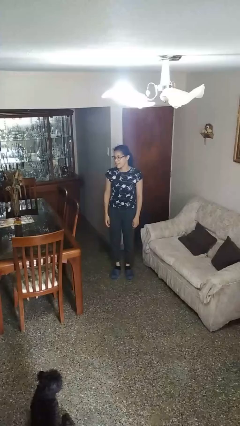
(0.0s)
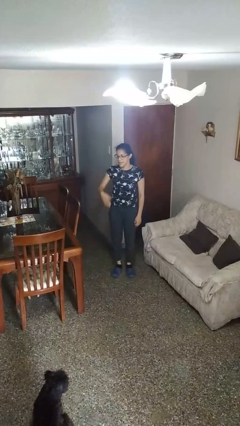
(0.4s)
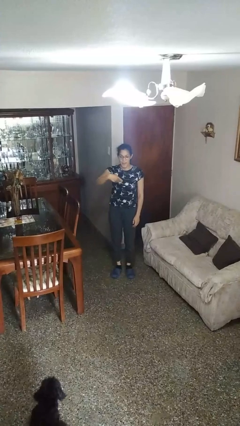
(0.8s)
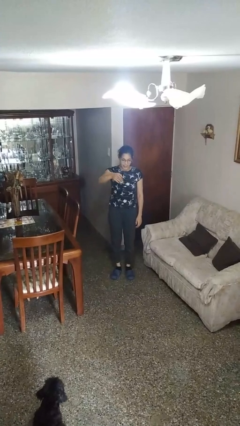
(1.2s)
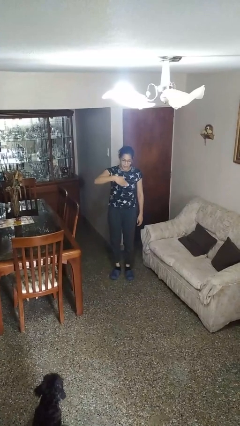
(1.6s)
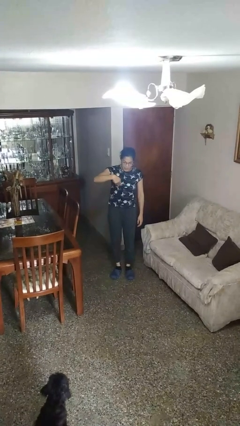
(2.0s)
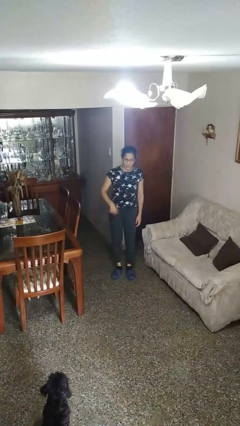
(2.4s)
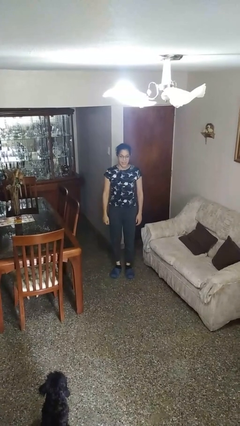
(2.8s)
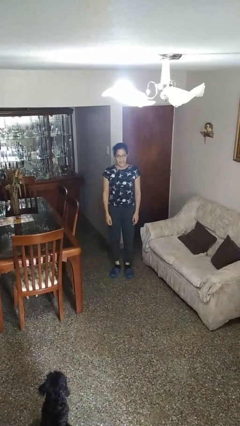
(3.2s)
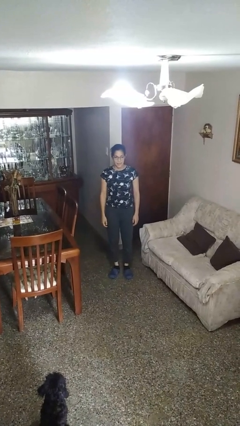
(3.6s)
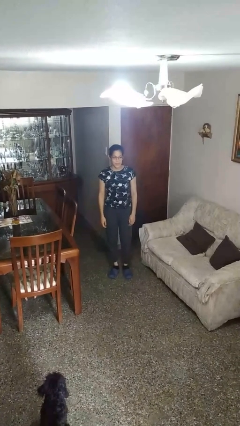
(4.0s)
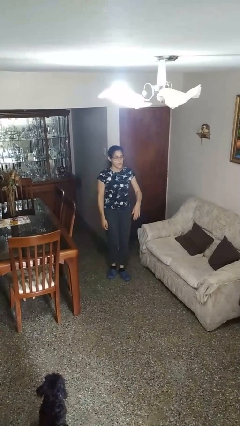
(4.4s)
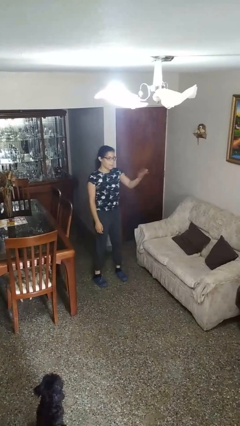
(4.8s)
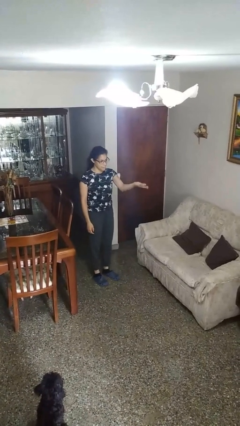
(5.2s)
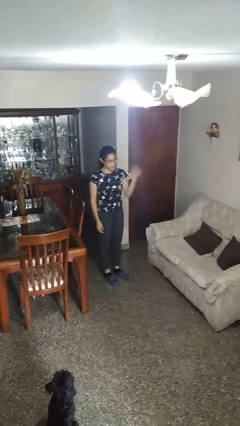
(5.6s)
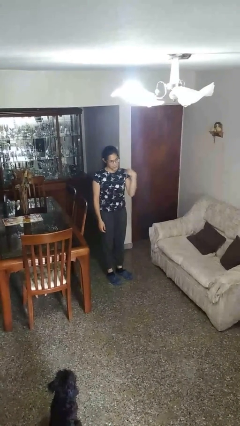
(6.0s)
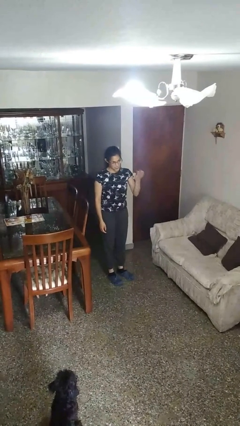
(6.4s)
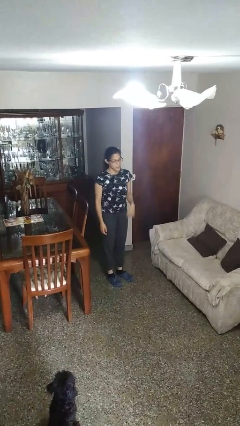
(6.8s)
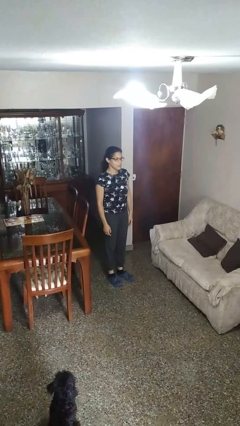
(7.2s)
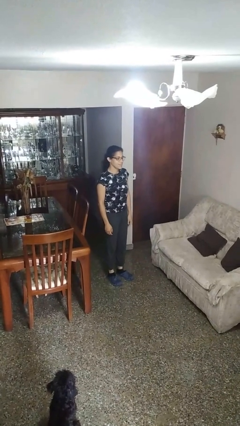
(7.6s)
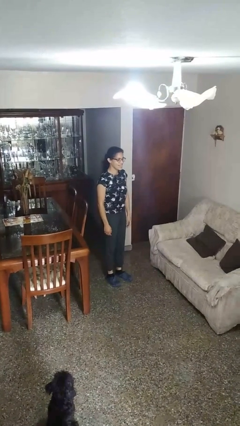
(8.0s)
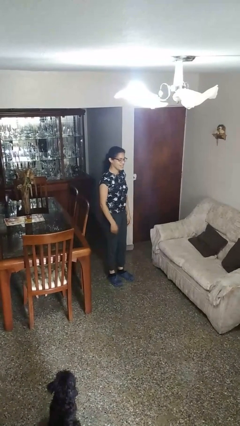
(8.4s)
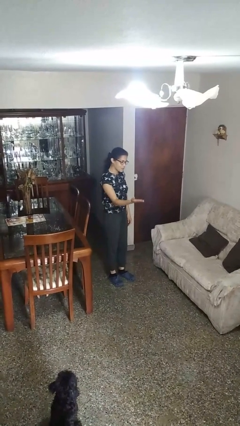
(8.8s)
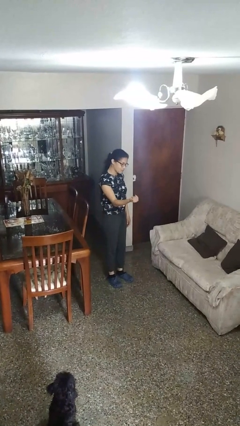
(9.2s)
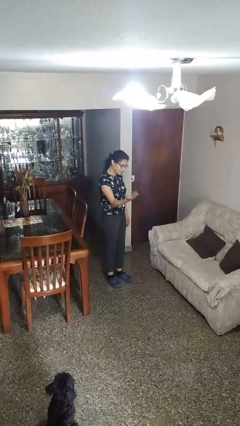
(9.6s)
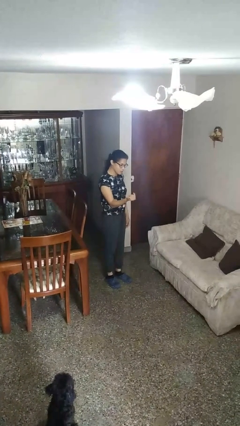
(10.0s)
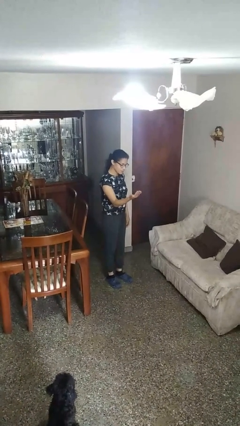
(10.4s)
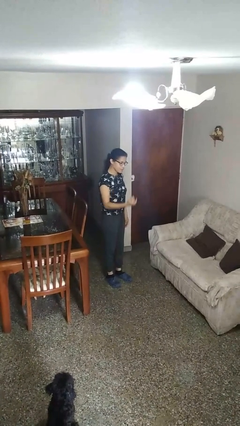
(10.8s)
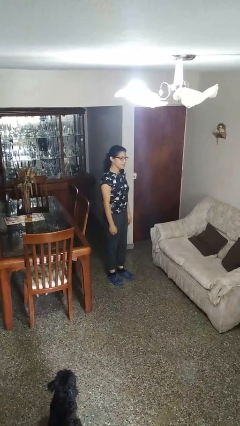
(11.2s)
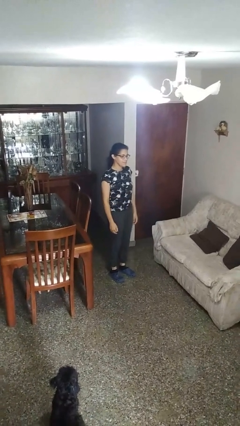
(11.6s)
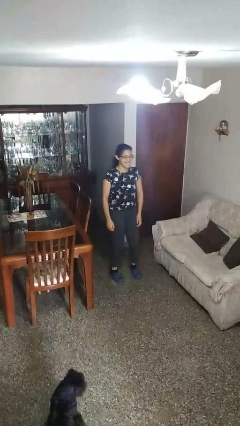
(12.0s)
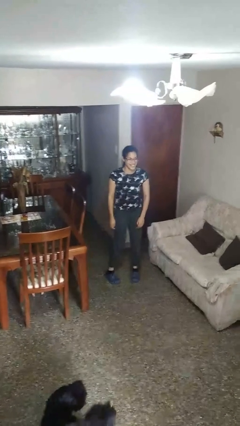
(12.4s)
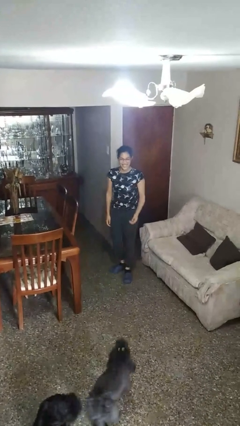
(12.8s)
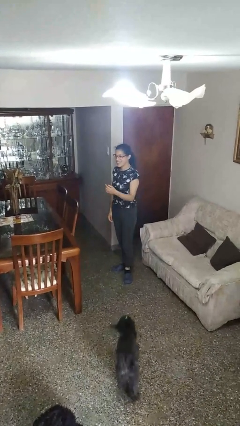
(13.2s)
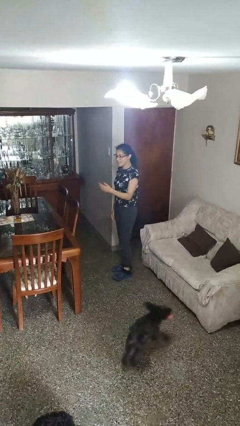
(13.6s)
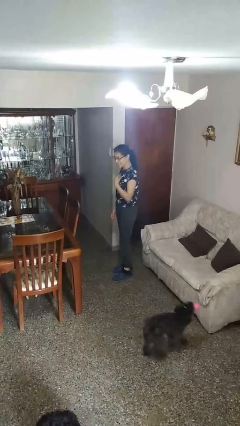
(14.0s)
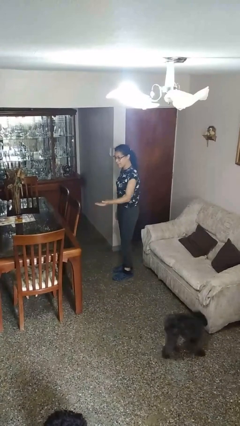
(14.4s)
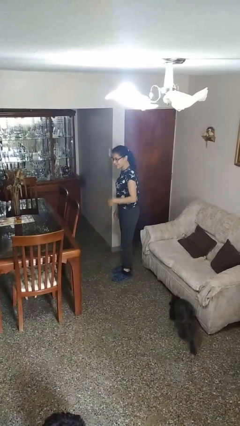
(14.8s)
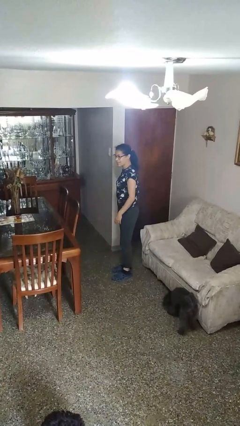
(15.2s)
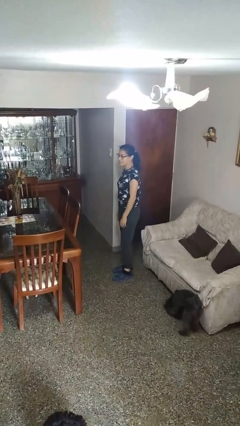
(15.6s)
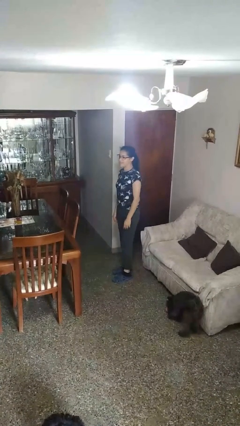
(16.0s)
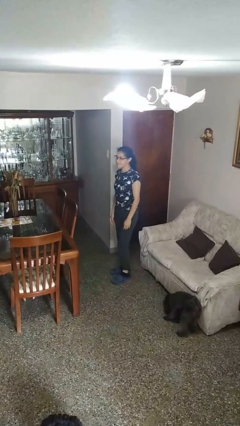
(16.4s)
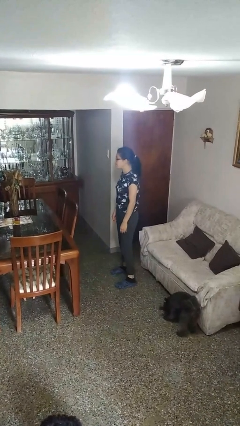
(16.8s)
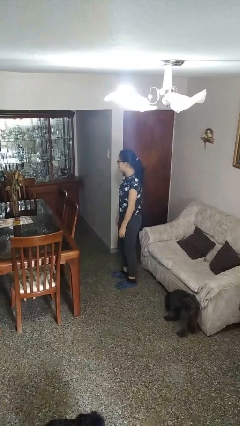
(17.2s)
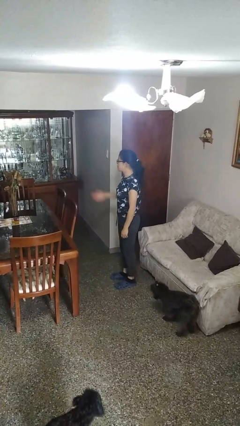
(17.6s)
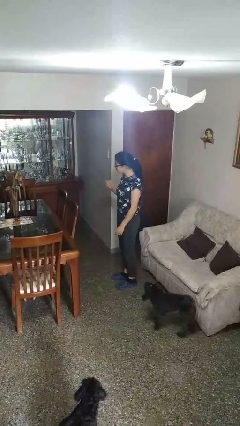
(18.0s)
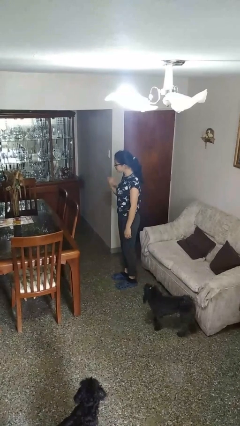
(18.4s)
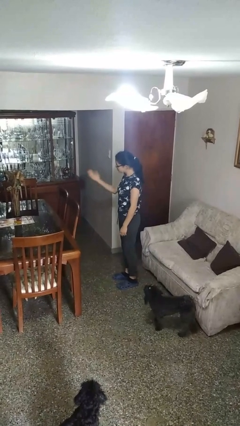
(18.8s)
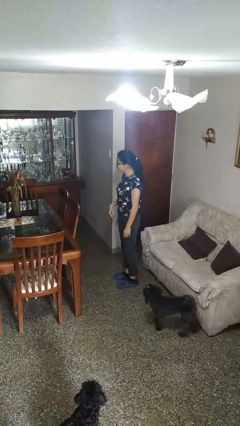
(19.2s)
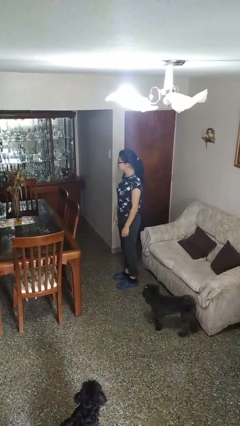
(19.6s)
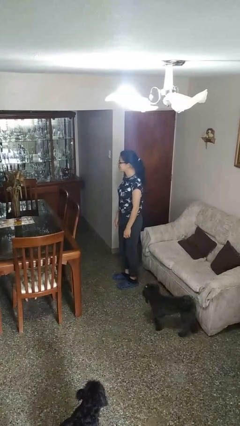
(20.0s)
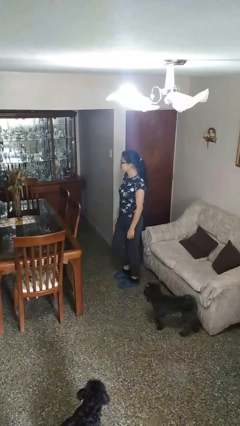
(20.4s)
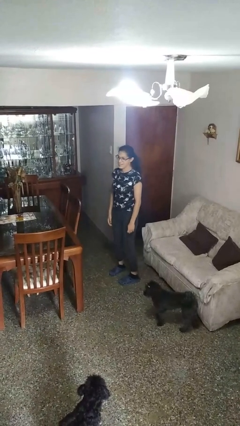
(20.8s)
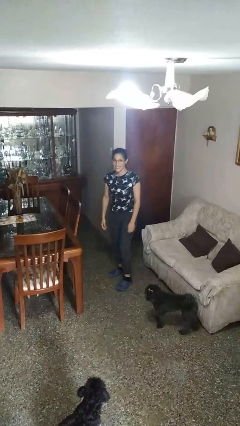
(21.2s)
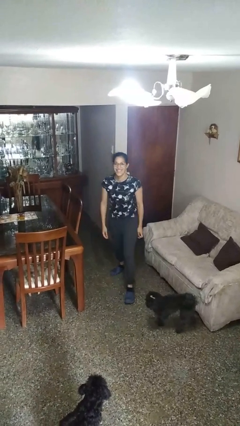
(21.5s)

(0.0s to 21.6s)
person gestures come here

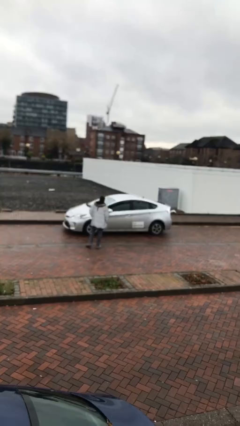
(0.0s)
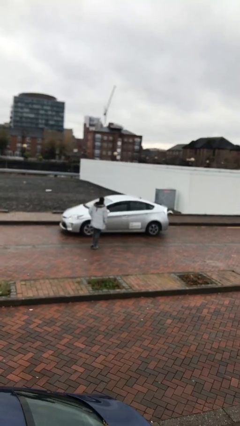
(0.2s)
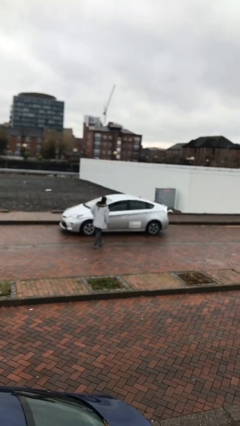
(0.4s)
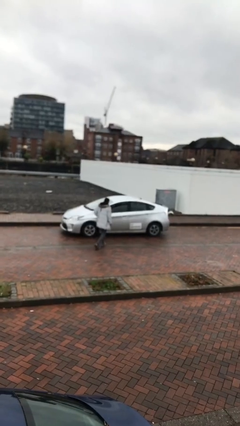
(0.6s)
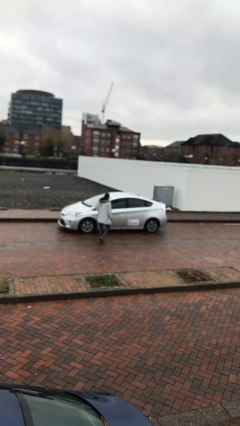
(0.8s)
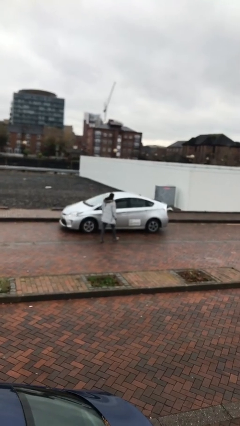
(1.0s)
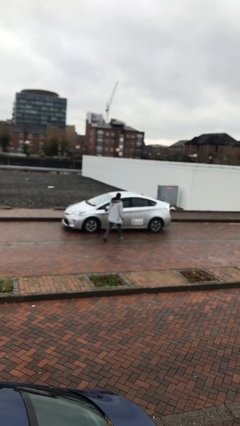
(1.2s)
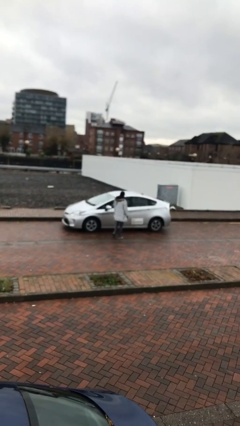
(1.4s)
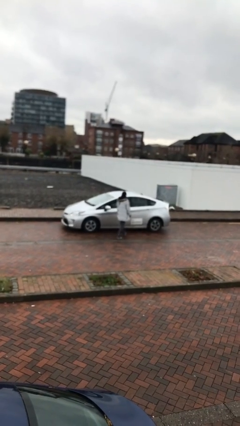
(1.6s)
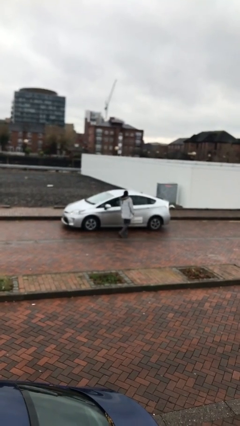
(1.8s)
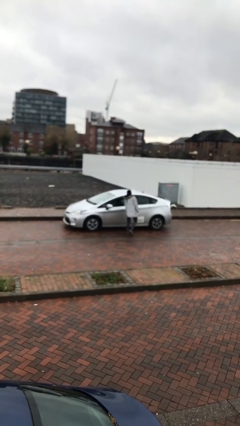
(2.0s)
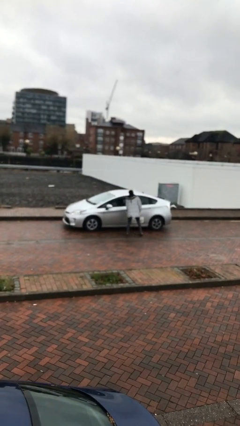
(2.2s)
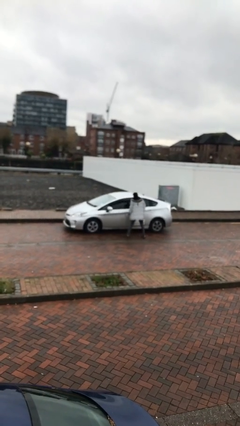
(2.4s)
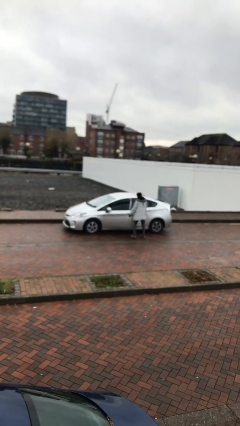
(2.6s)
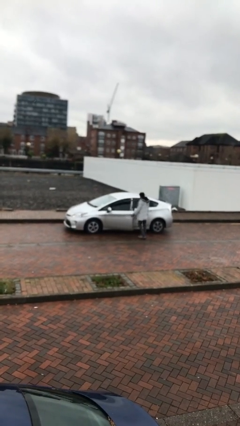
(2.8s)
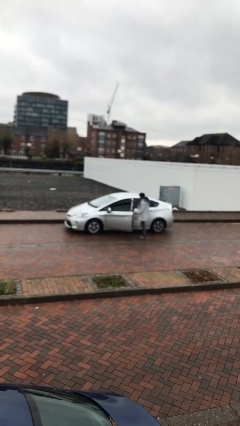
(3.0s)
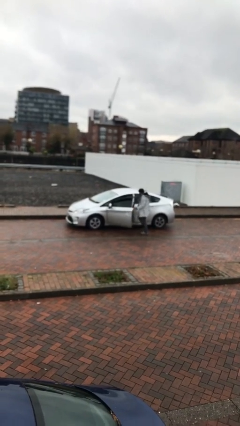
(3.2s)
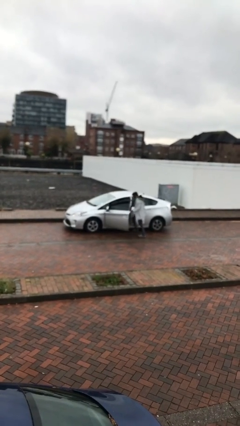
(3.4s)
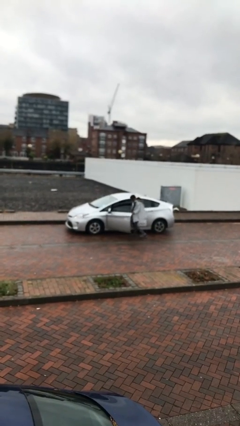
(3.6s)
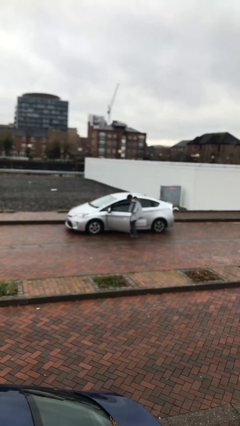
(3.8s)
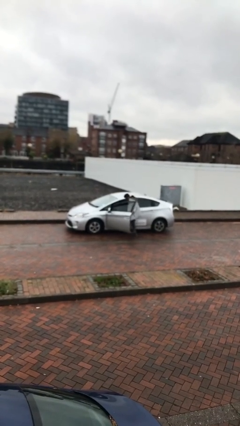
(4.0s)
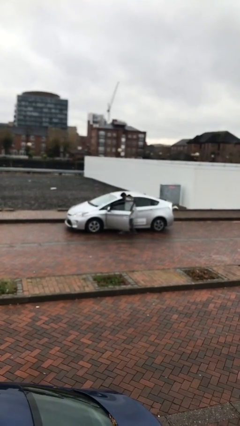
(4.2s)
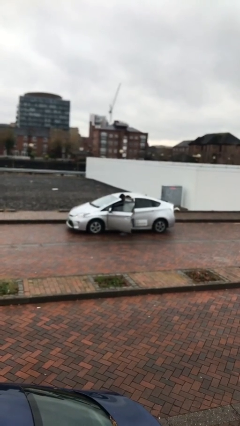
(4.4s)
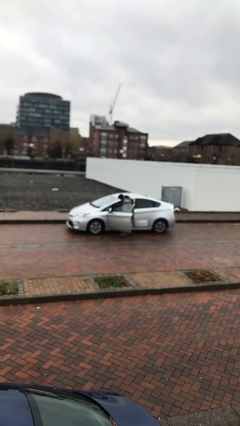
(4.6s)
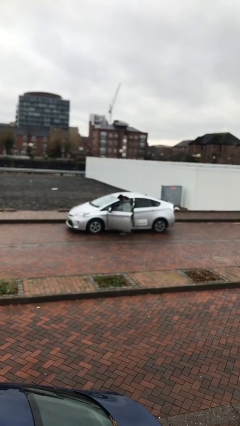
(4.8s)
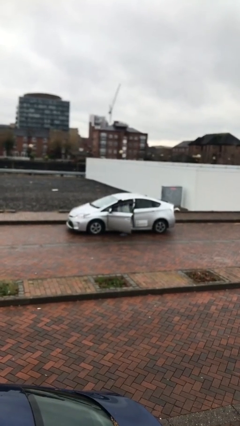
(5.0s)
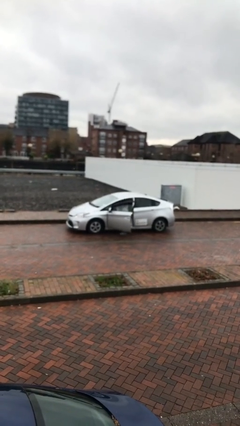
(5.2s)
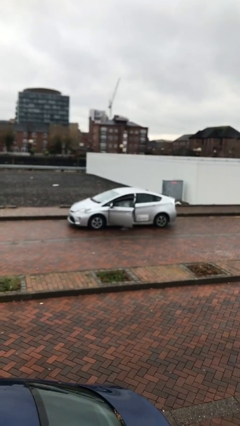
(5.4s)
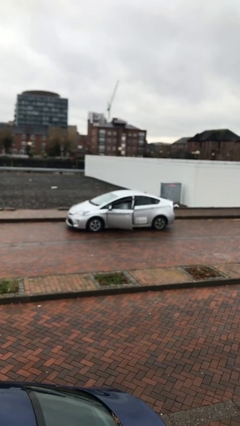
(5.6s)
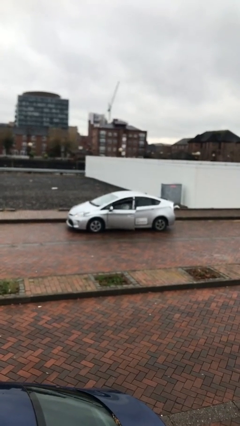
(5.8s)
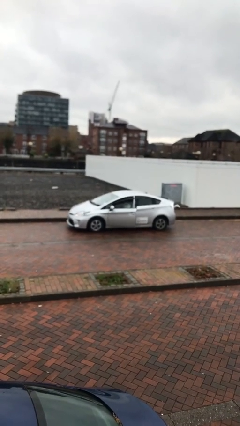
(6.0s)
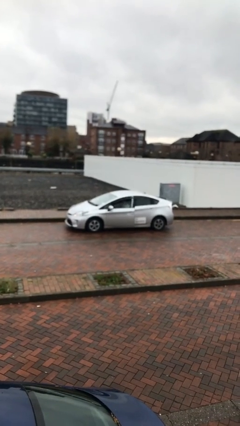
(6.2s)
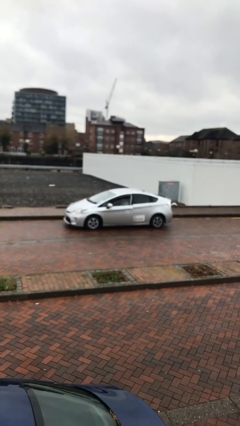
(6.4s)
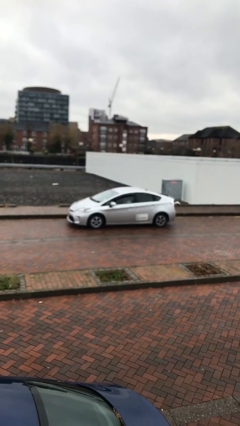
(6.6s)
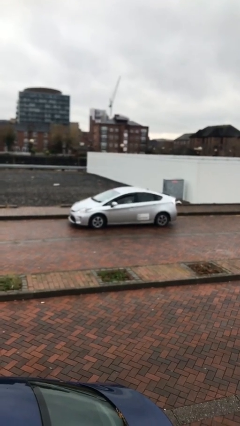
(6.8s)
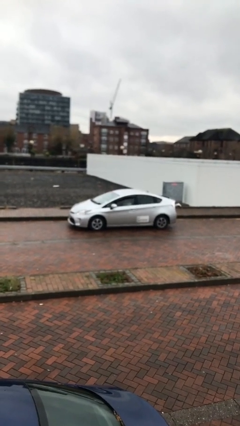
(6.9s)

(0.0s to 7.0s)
car picks up person

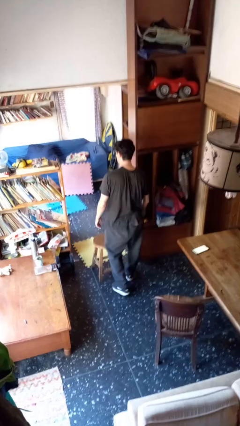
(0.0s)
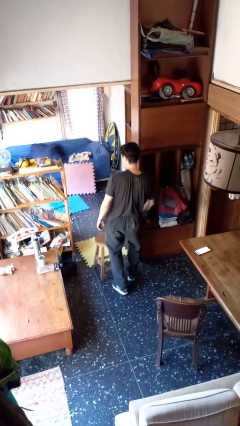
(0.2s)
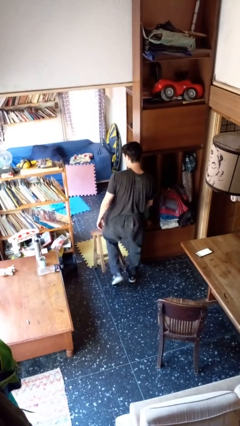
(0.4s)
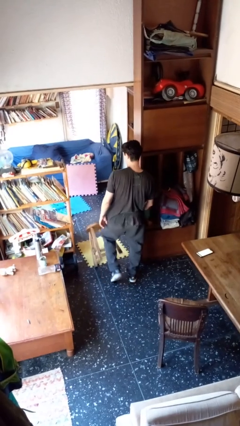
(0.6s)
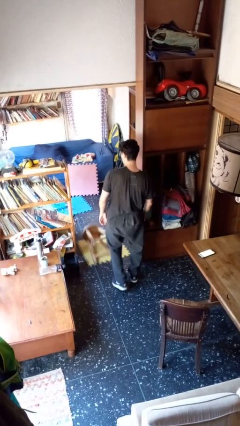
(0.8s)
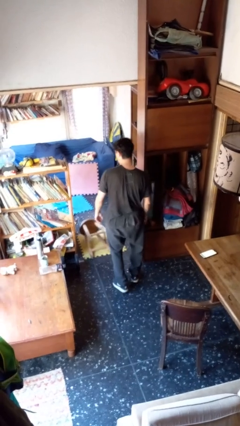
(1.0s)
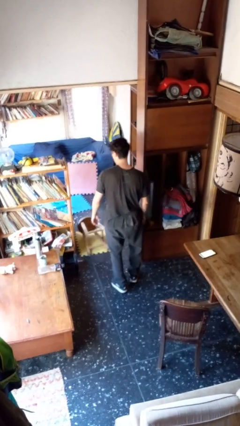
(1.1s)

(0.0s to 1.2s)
person knocks over furniture
